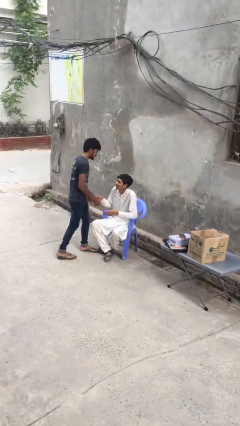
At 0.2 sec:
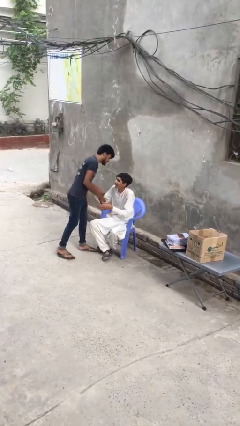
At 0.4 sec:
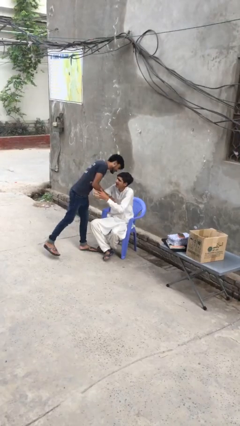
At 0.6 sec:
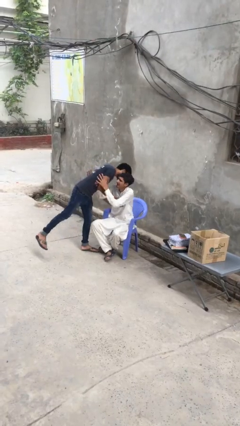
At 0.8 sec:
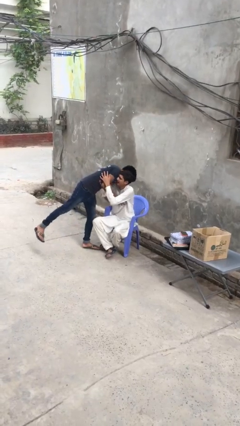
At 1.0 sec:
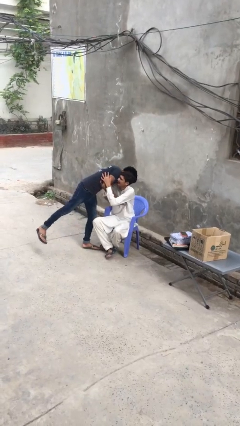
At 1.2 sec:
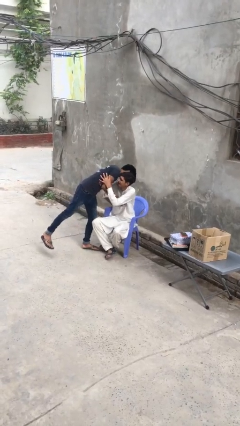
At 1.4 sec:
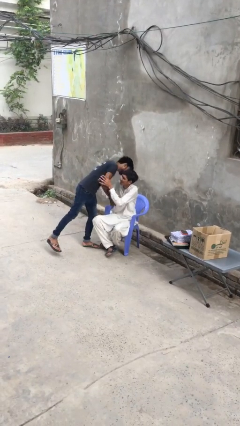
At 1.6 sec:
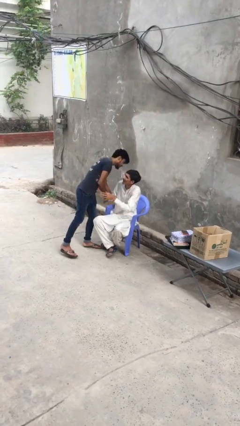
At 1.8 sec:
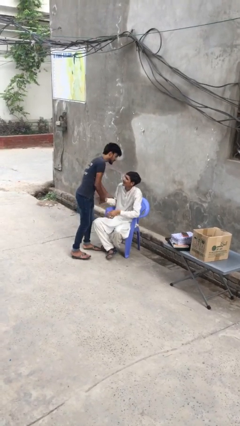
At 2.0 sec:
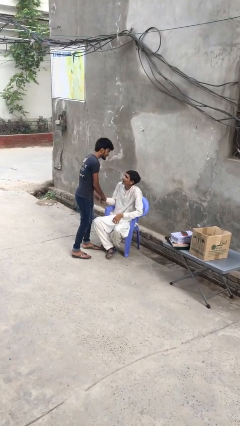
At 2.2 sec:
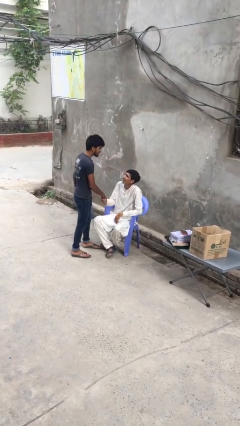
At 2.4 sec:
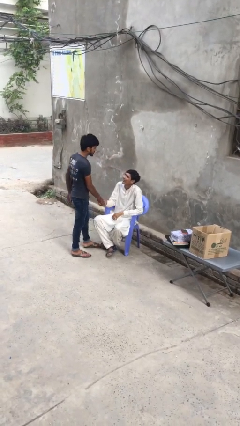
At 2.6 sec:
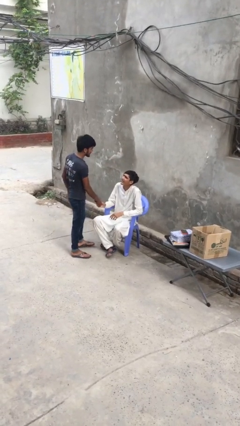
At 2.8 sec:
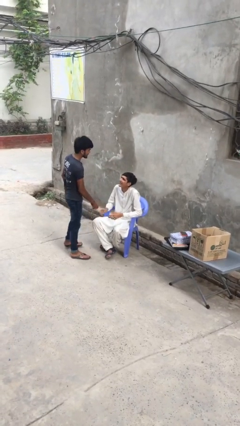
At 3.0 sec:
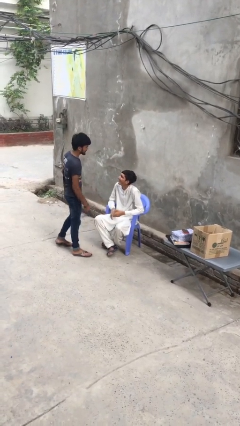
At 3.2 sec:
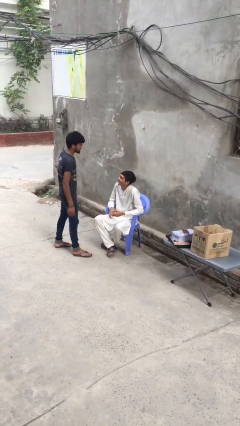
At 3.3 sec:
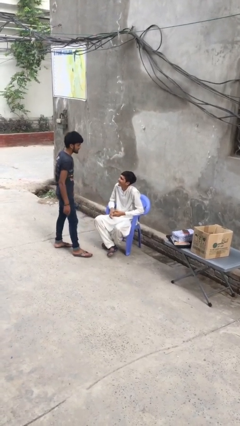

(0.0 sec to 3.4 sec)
person embraces person

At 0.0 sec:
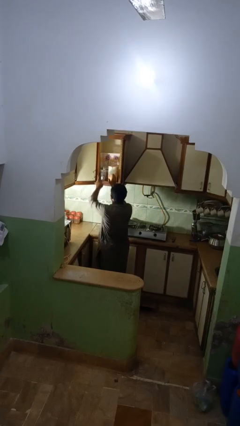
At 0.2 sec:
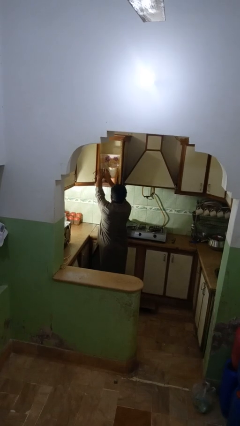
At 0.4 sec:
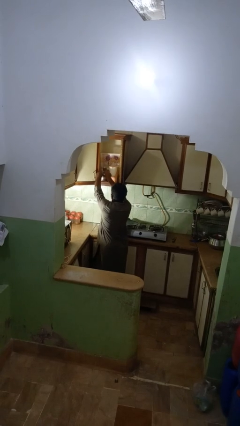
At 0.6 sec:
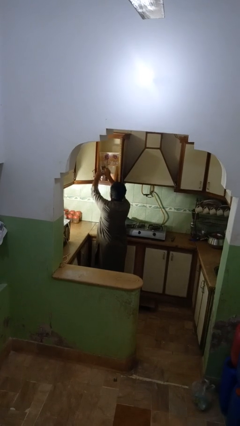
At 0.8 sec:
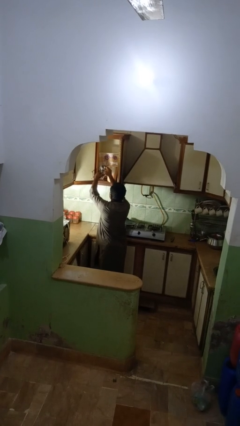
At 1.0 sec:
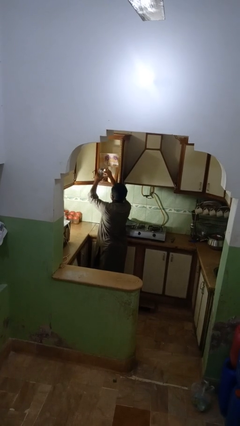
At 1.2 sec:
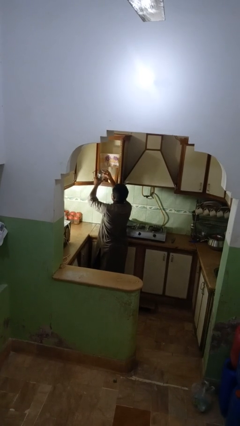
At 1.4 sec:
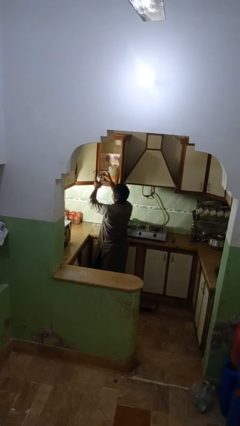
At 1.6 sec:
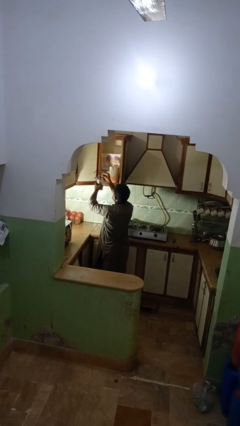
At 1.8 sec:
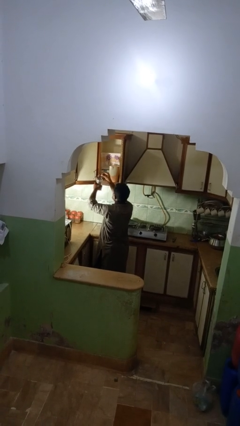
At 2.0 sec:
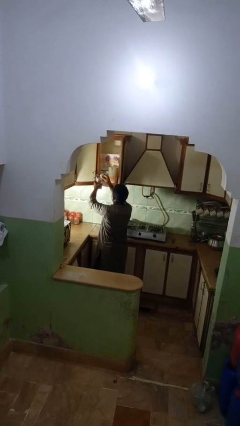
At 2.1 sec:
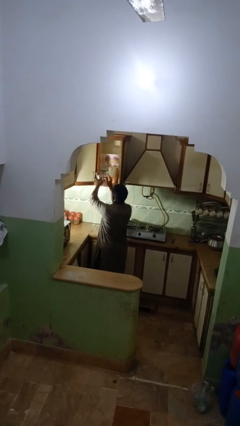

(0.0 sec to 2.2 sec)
person searches in kitchen drawer

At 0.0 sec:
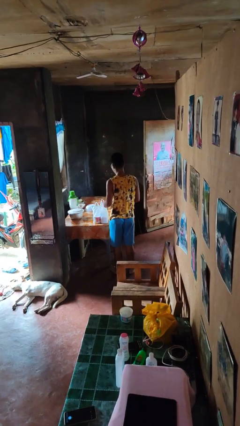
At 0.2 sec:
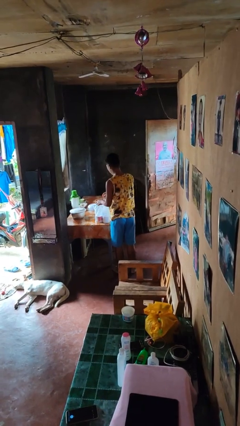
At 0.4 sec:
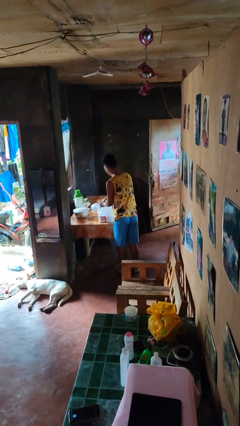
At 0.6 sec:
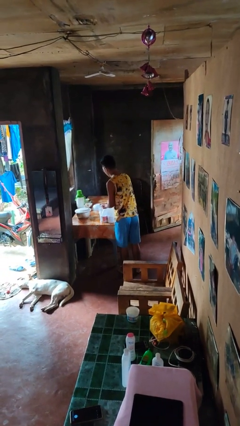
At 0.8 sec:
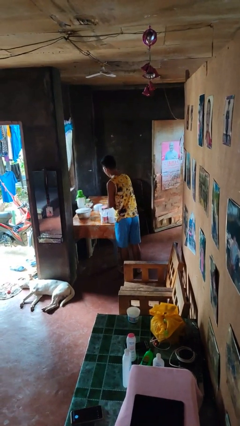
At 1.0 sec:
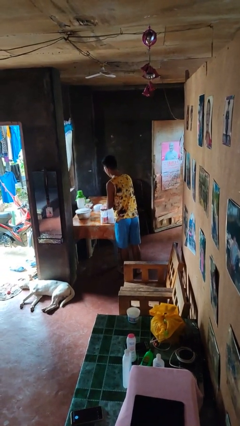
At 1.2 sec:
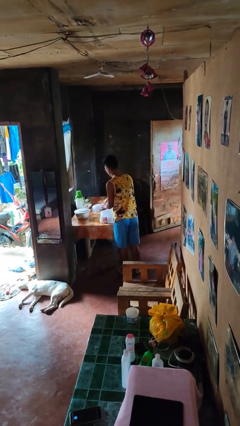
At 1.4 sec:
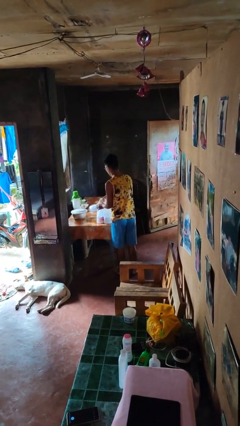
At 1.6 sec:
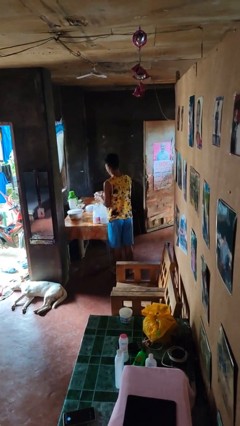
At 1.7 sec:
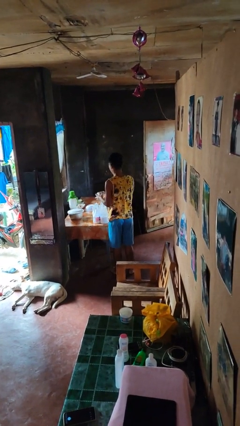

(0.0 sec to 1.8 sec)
person takes object from bag

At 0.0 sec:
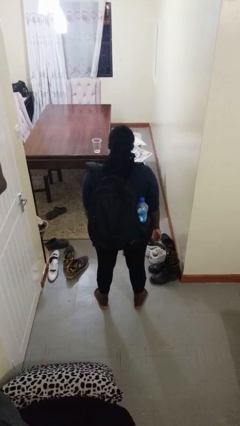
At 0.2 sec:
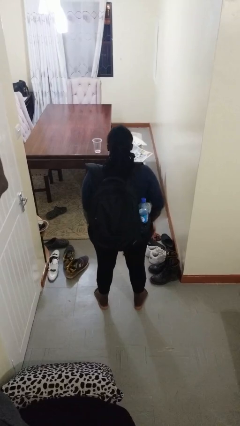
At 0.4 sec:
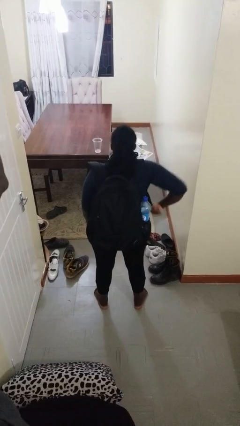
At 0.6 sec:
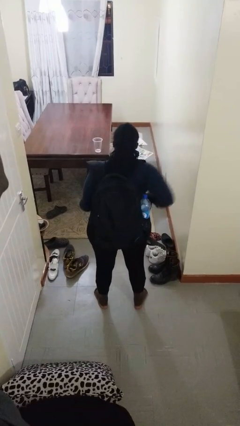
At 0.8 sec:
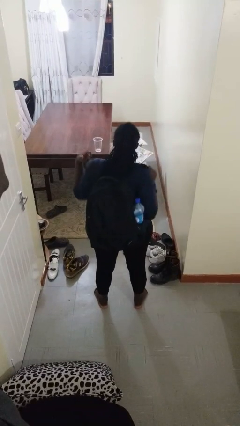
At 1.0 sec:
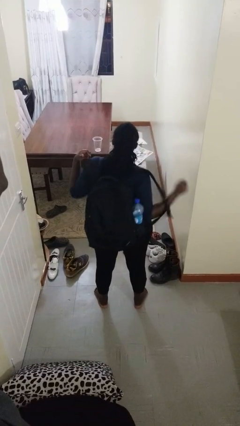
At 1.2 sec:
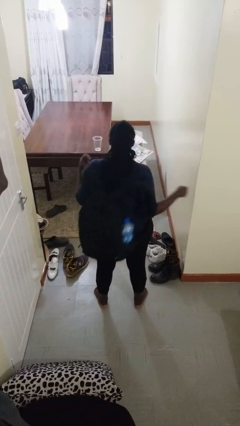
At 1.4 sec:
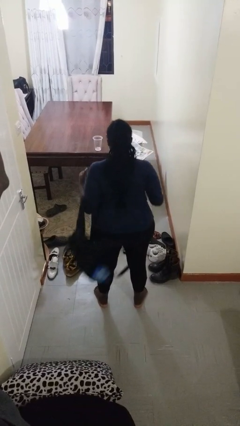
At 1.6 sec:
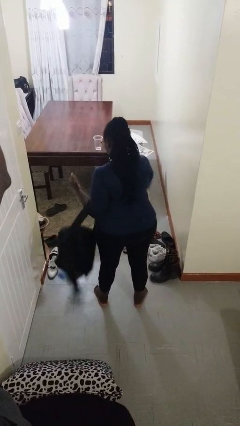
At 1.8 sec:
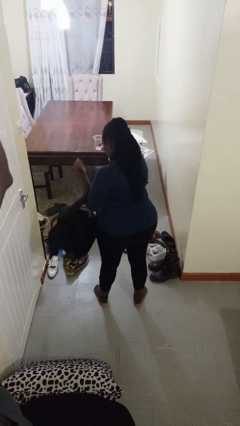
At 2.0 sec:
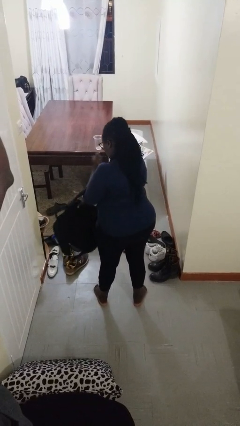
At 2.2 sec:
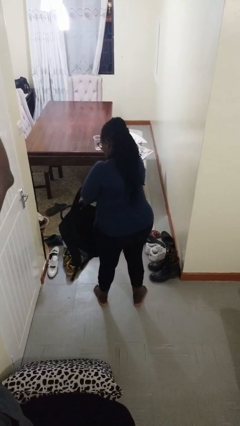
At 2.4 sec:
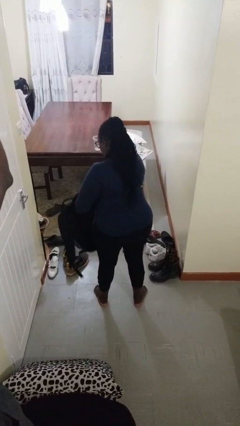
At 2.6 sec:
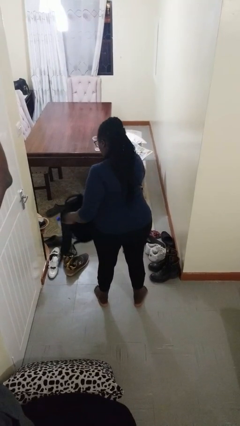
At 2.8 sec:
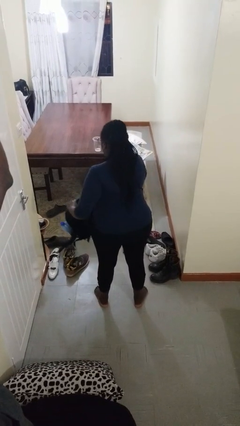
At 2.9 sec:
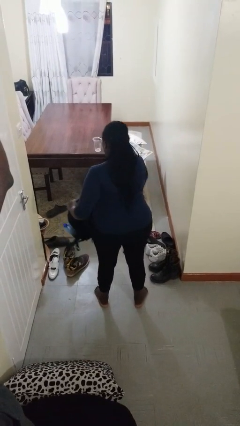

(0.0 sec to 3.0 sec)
person takes off backpack

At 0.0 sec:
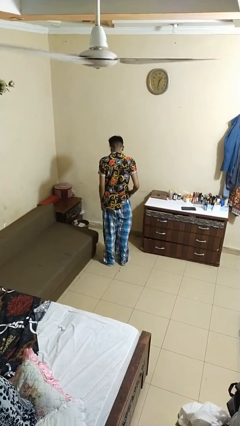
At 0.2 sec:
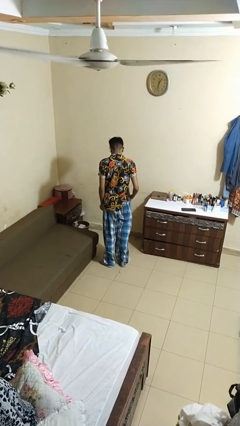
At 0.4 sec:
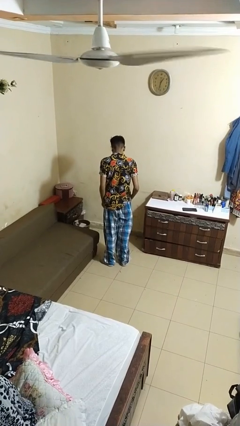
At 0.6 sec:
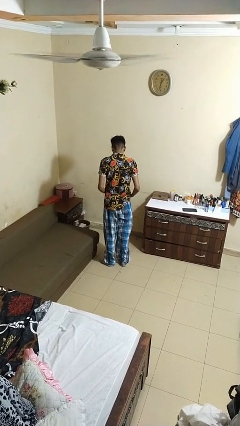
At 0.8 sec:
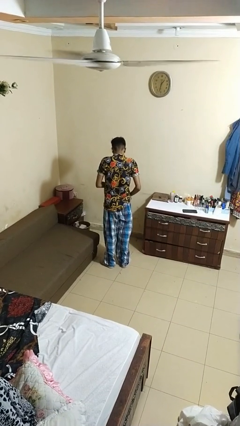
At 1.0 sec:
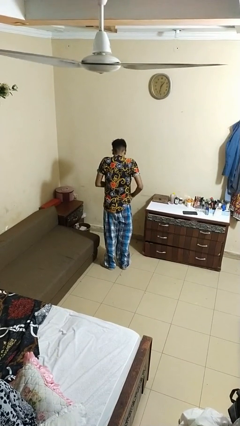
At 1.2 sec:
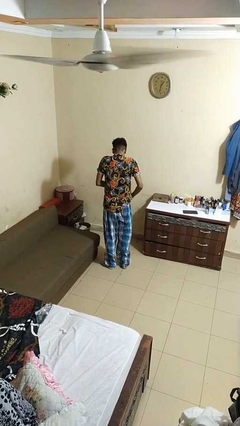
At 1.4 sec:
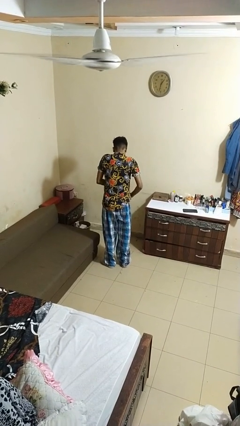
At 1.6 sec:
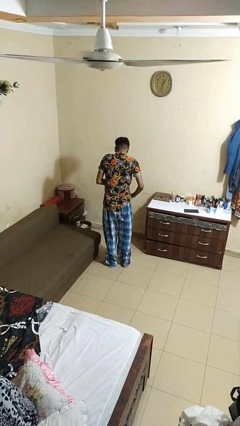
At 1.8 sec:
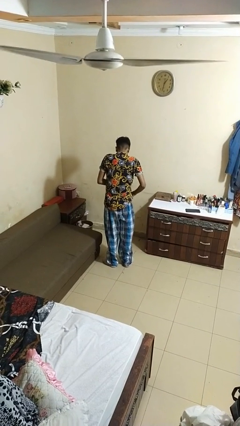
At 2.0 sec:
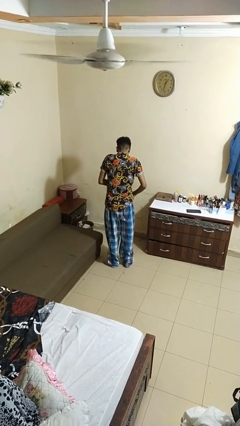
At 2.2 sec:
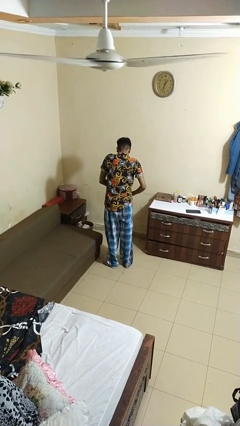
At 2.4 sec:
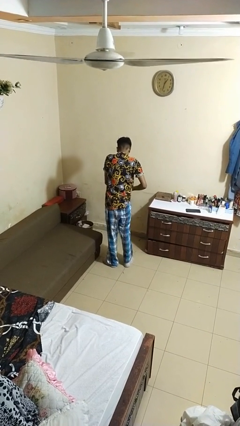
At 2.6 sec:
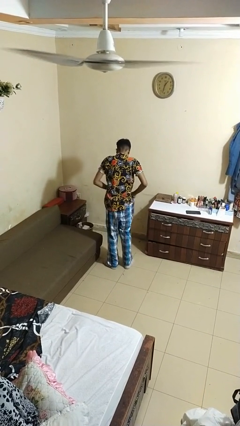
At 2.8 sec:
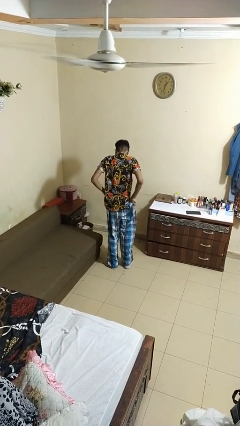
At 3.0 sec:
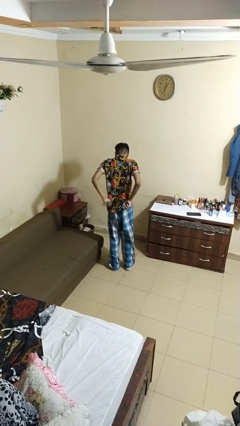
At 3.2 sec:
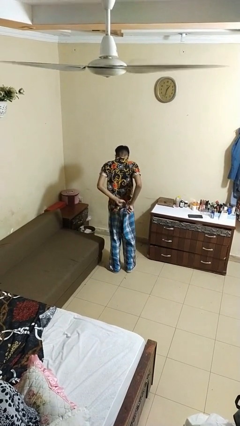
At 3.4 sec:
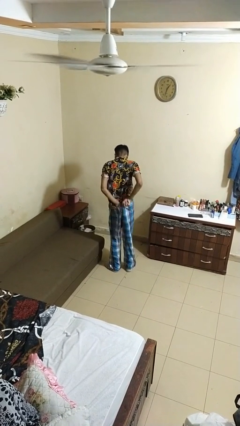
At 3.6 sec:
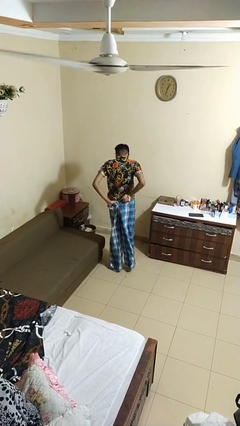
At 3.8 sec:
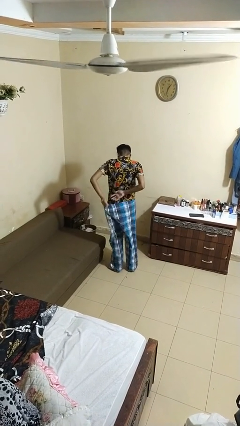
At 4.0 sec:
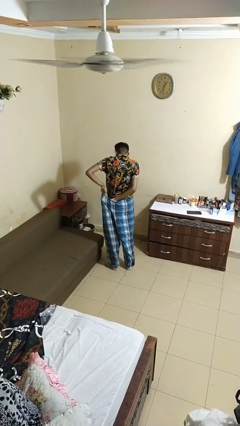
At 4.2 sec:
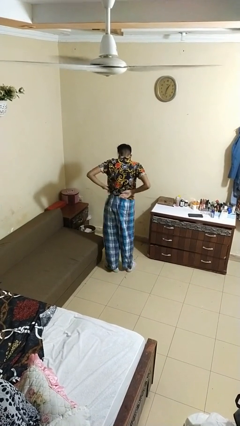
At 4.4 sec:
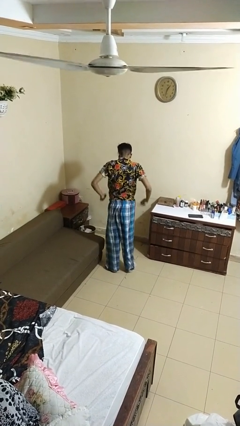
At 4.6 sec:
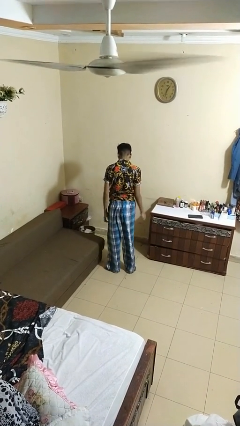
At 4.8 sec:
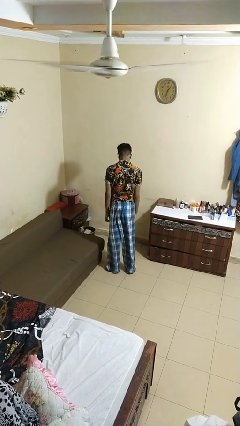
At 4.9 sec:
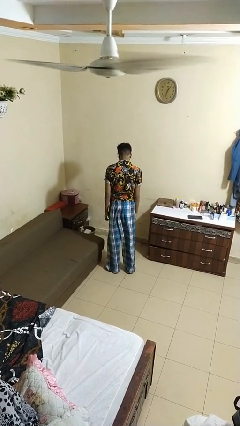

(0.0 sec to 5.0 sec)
person tucks in shirt

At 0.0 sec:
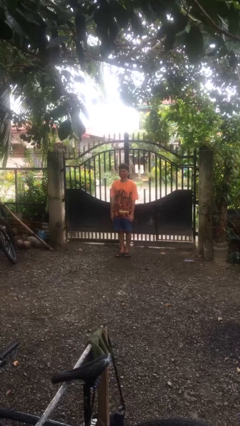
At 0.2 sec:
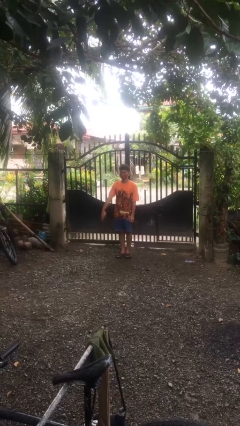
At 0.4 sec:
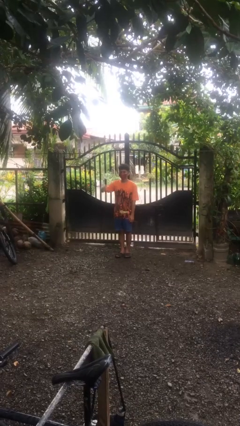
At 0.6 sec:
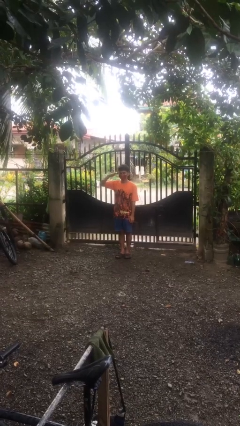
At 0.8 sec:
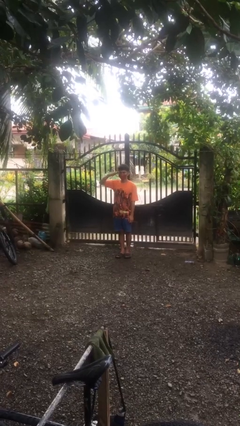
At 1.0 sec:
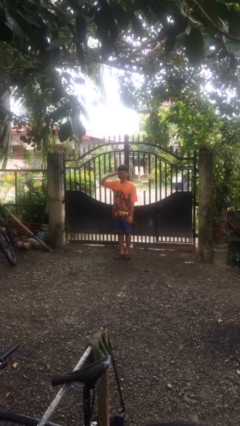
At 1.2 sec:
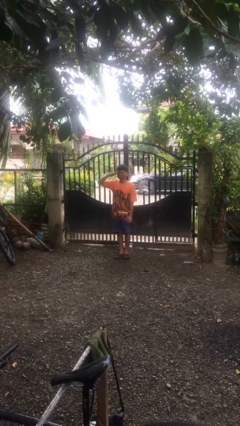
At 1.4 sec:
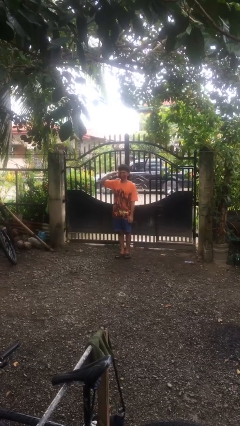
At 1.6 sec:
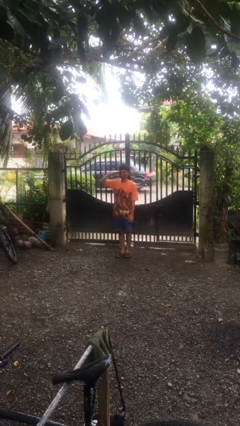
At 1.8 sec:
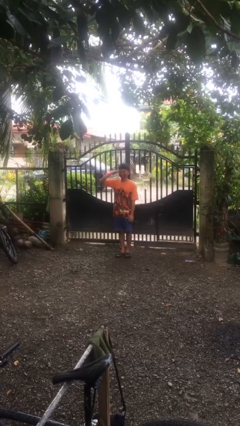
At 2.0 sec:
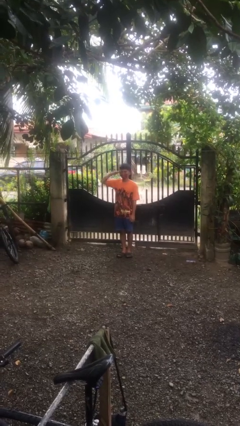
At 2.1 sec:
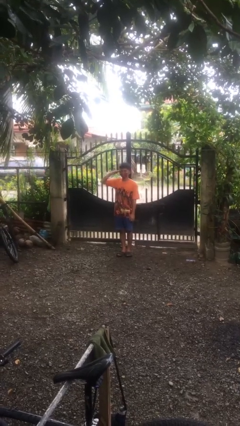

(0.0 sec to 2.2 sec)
person salutes
